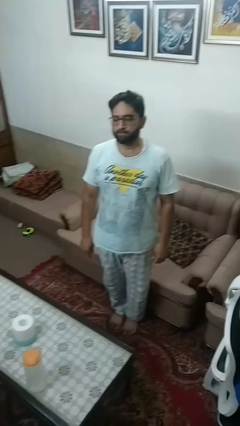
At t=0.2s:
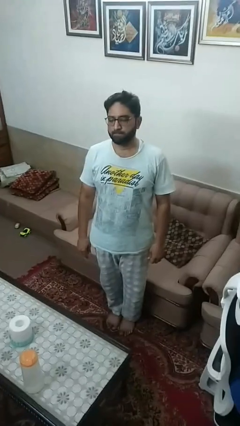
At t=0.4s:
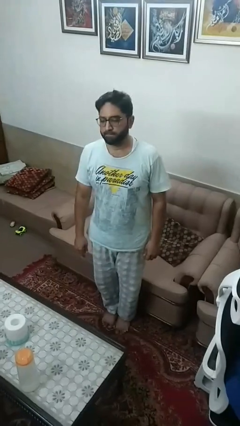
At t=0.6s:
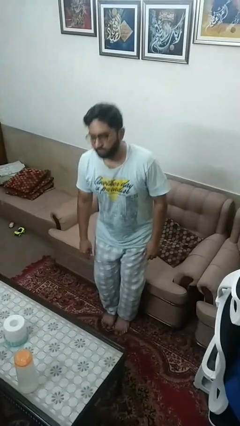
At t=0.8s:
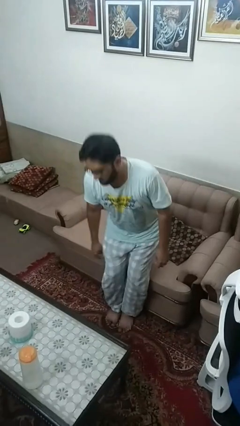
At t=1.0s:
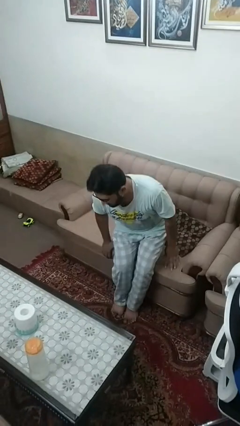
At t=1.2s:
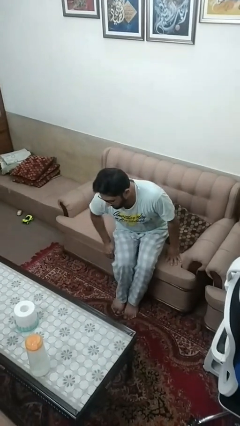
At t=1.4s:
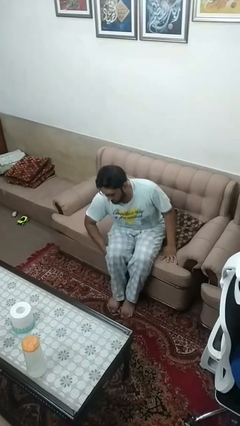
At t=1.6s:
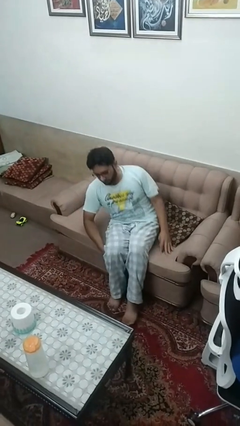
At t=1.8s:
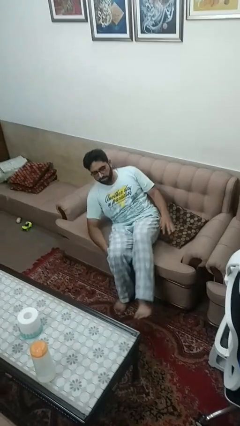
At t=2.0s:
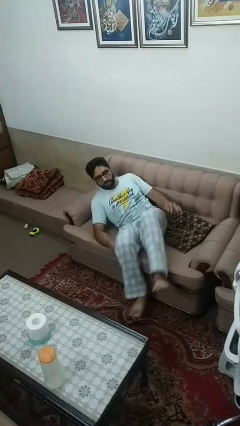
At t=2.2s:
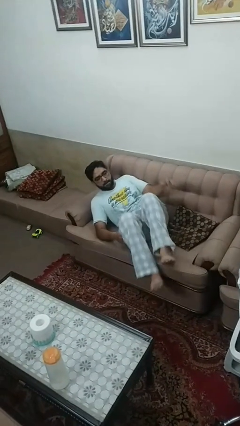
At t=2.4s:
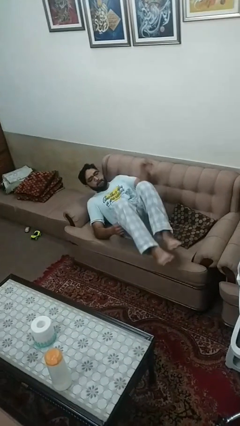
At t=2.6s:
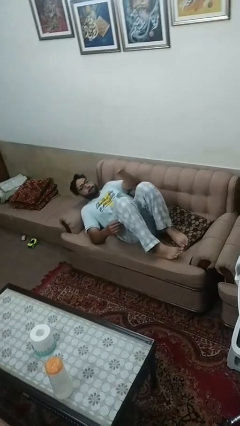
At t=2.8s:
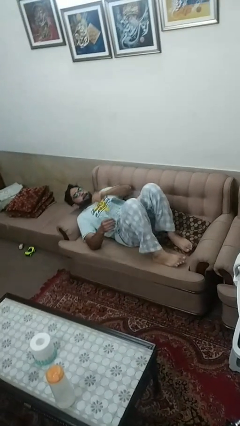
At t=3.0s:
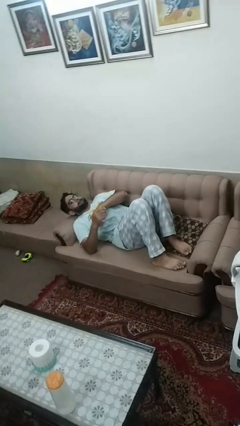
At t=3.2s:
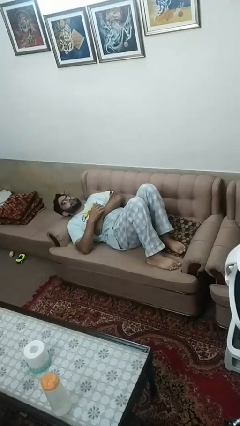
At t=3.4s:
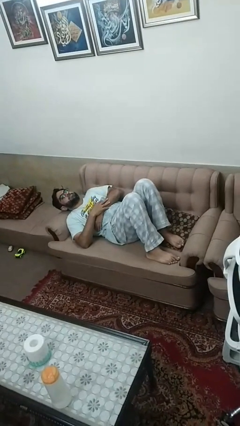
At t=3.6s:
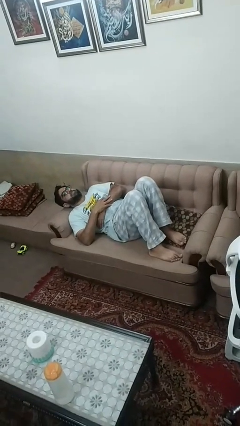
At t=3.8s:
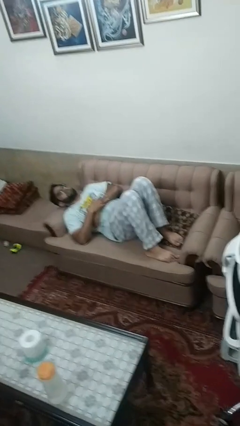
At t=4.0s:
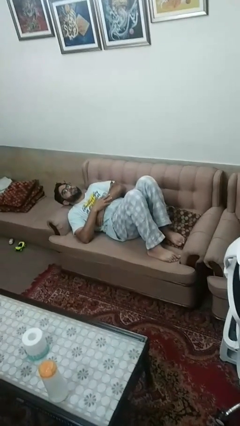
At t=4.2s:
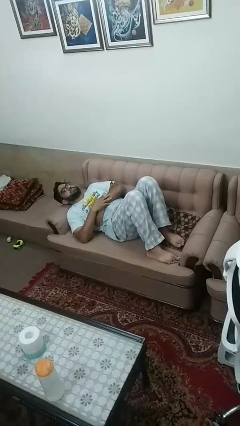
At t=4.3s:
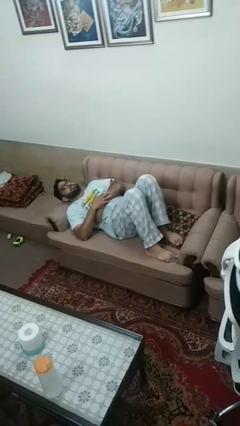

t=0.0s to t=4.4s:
person lies down on couch

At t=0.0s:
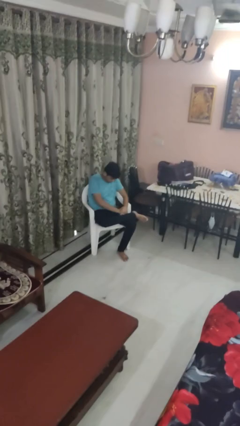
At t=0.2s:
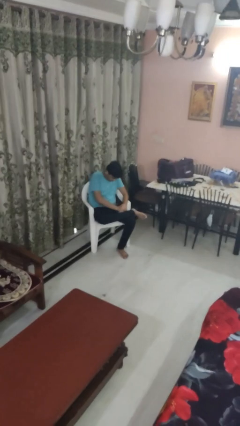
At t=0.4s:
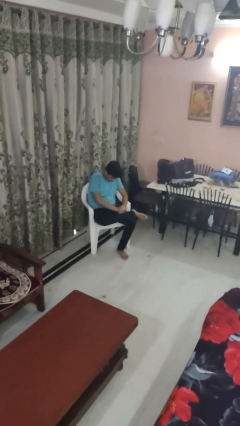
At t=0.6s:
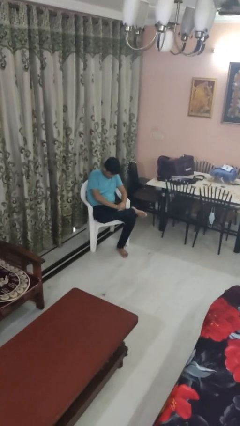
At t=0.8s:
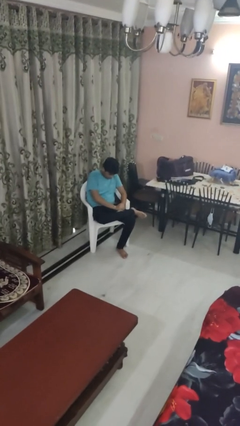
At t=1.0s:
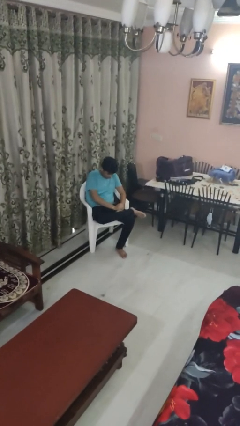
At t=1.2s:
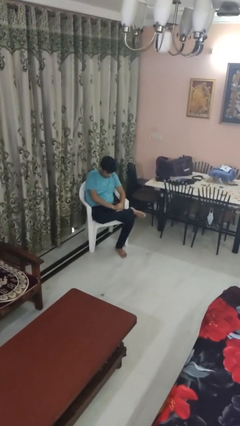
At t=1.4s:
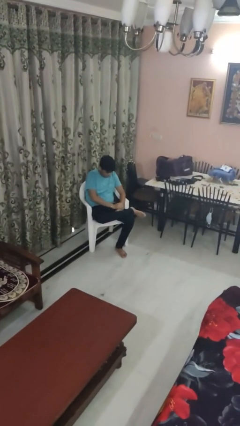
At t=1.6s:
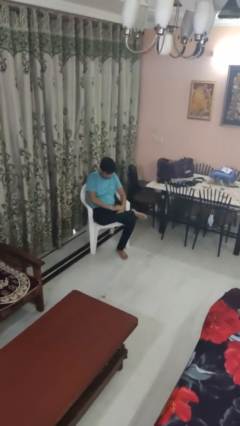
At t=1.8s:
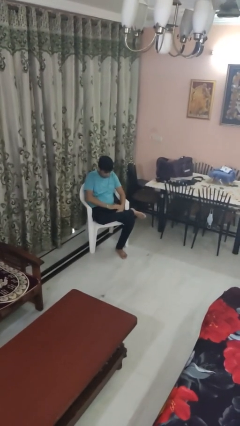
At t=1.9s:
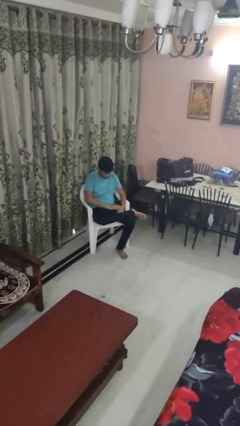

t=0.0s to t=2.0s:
person swats bug

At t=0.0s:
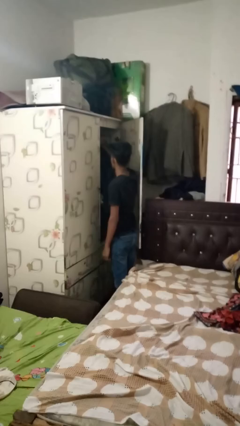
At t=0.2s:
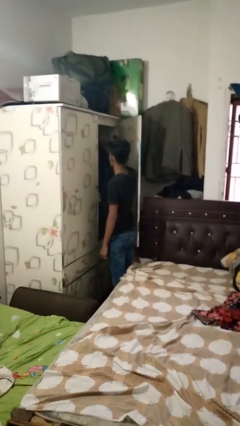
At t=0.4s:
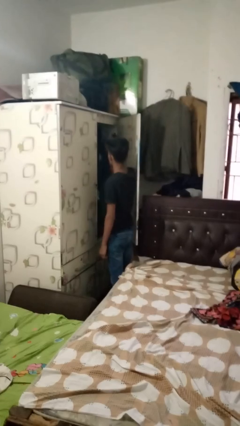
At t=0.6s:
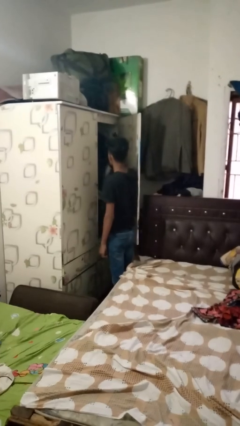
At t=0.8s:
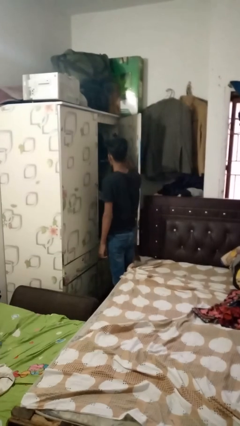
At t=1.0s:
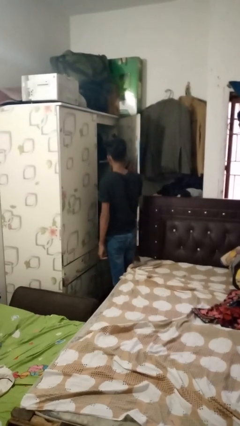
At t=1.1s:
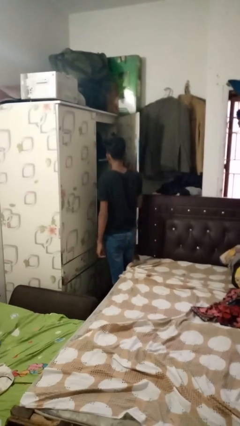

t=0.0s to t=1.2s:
person takes clothes from closet

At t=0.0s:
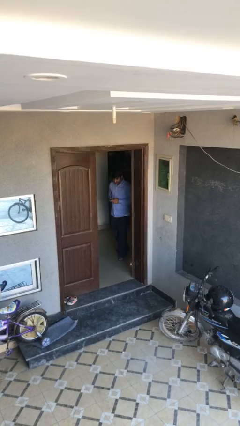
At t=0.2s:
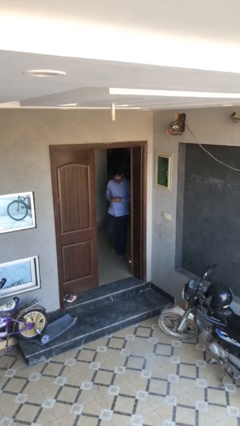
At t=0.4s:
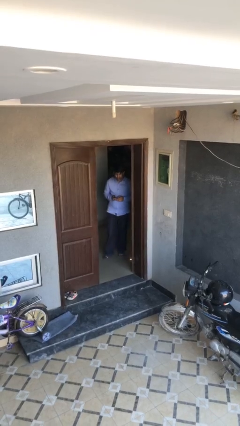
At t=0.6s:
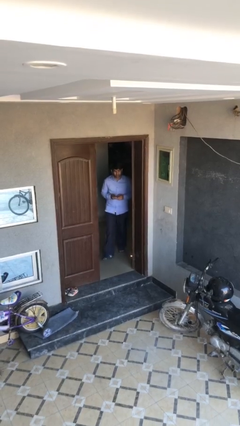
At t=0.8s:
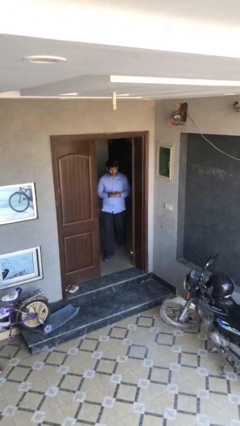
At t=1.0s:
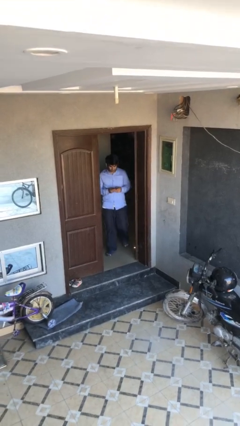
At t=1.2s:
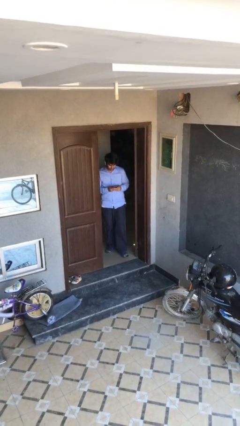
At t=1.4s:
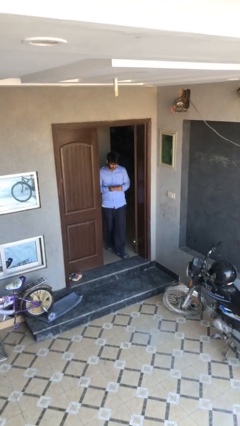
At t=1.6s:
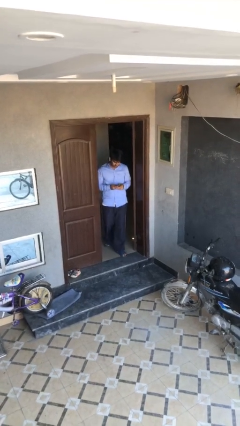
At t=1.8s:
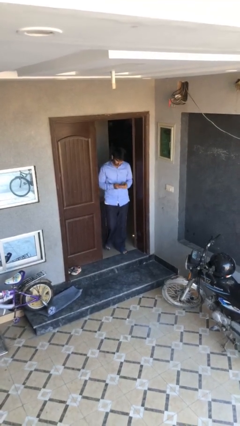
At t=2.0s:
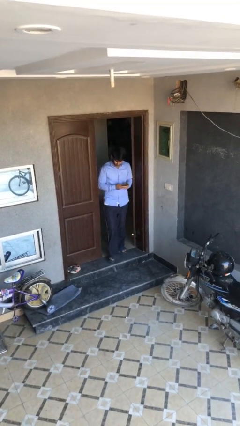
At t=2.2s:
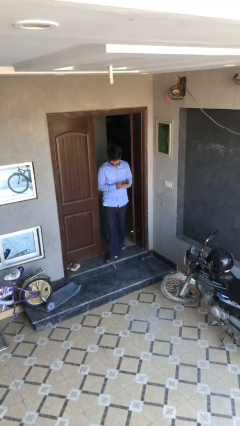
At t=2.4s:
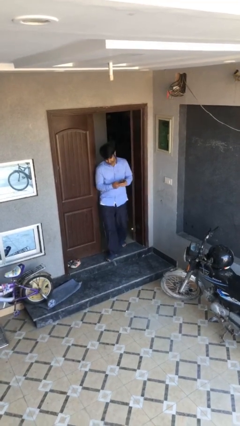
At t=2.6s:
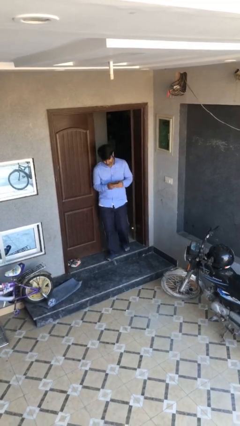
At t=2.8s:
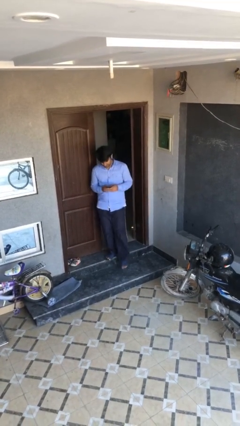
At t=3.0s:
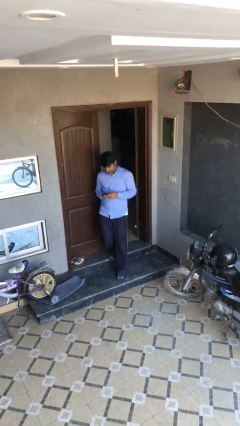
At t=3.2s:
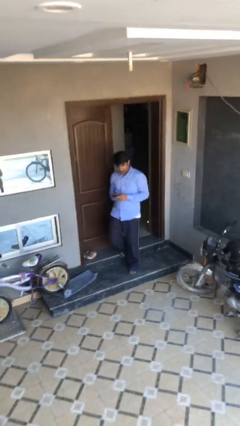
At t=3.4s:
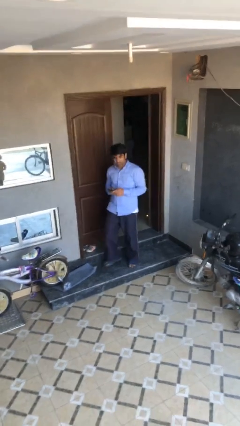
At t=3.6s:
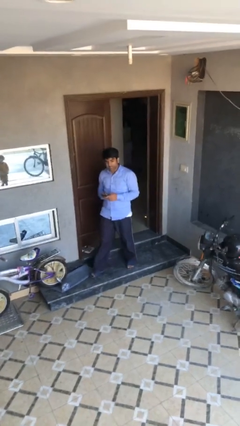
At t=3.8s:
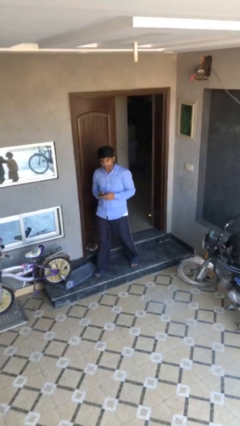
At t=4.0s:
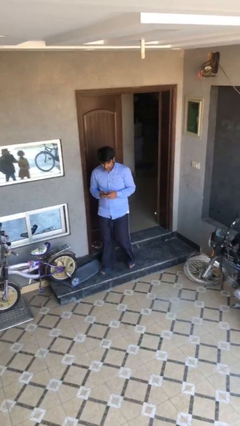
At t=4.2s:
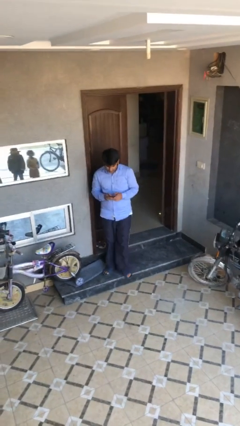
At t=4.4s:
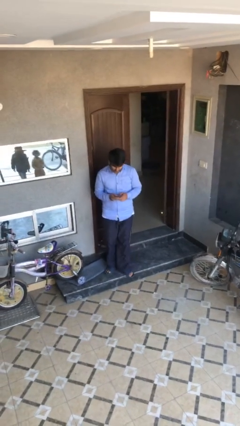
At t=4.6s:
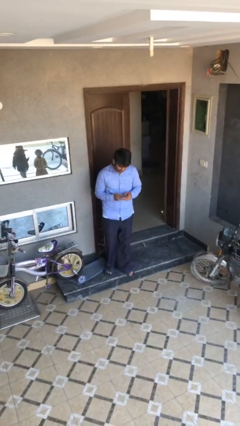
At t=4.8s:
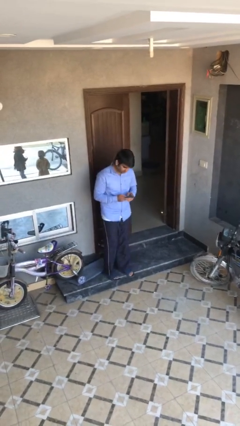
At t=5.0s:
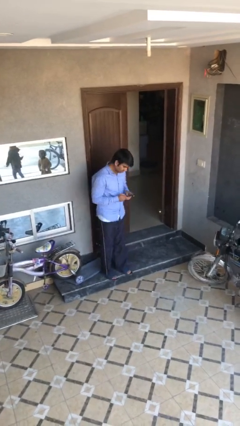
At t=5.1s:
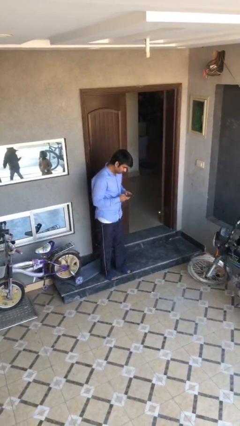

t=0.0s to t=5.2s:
person enters scene through structure

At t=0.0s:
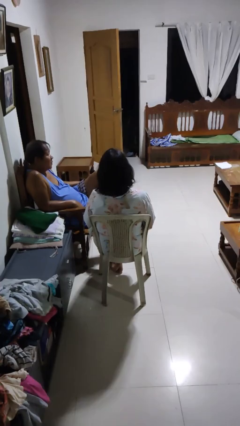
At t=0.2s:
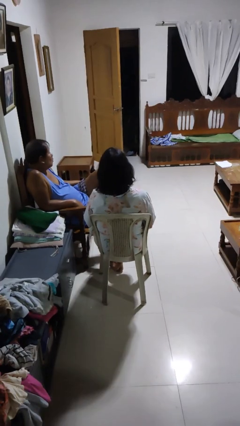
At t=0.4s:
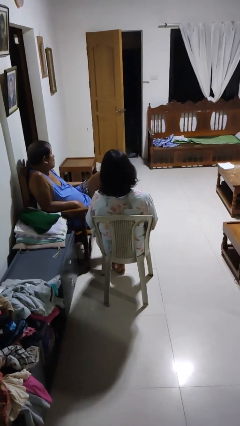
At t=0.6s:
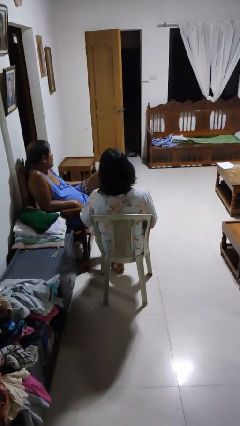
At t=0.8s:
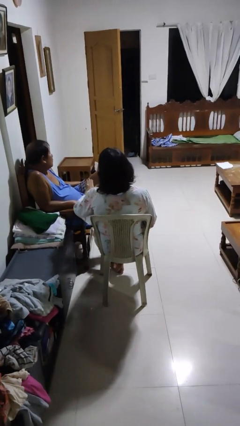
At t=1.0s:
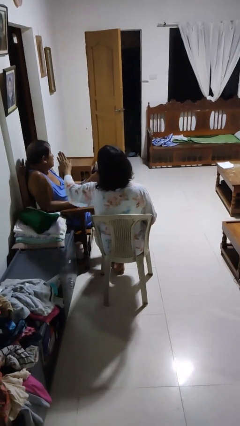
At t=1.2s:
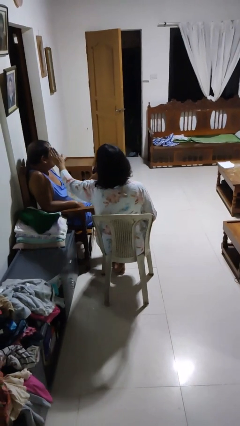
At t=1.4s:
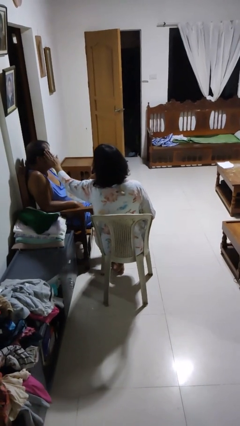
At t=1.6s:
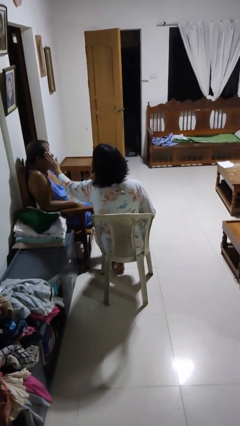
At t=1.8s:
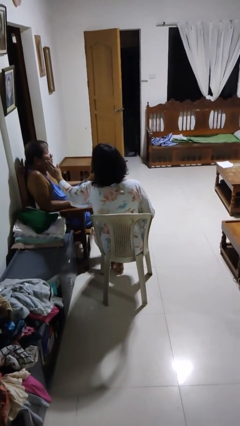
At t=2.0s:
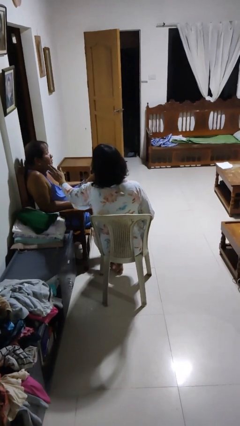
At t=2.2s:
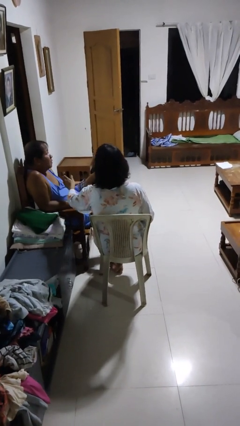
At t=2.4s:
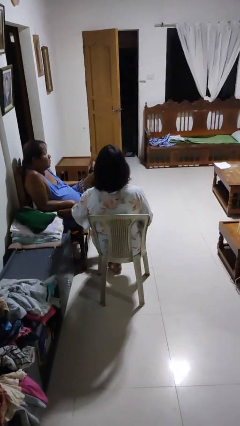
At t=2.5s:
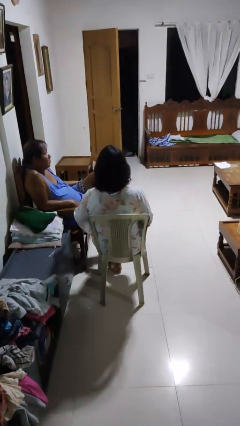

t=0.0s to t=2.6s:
person touches face of person

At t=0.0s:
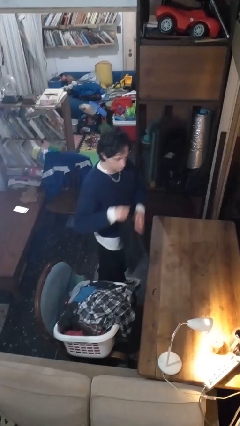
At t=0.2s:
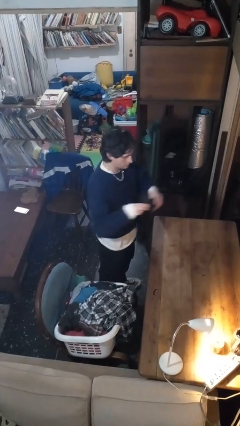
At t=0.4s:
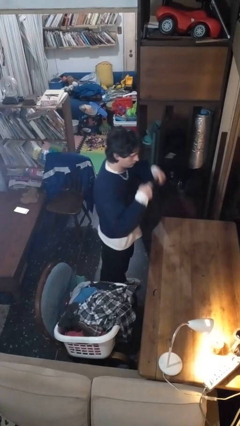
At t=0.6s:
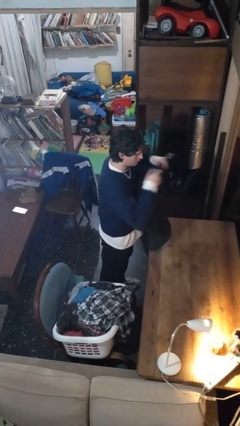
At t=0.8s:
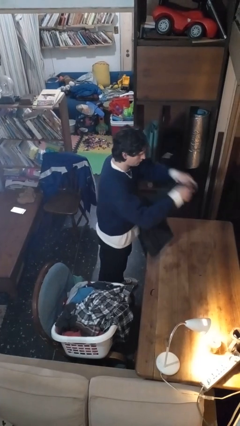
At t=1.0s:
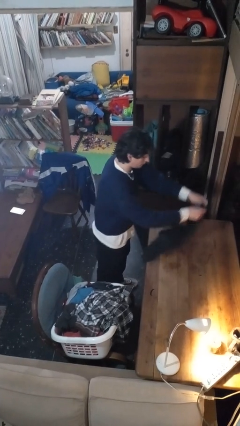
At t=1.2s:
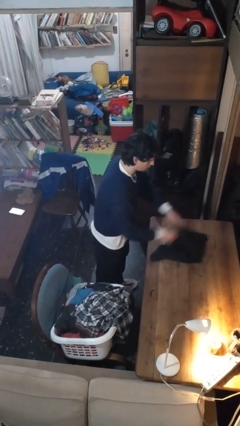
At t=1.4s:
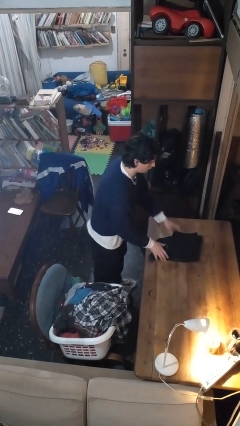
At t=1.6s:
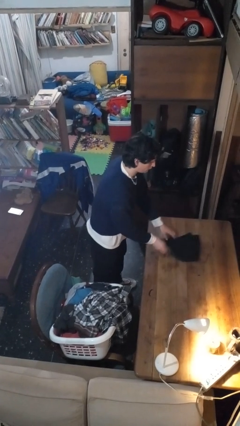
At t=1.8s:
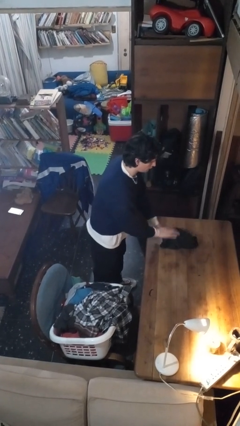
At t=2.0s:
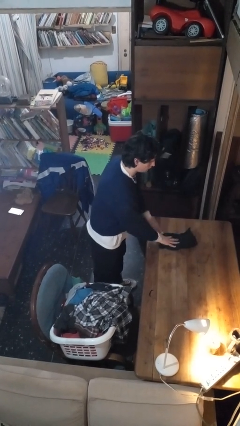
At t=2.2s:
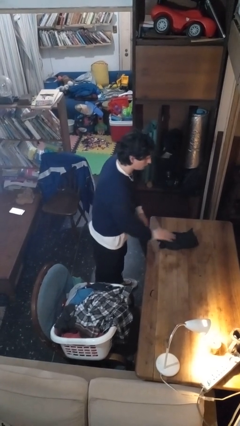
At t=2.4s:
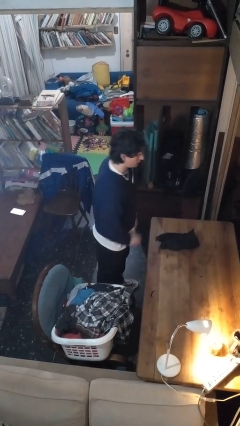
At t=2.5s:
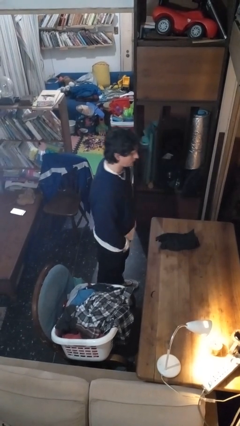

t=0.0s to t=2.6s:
person folds shirt
